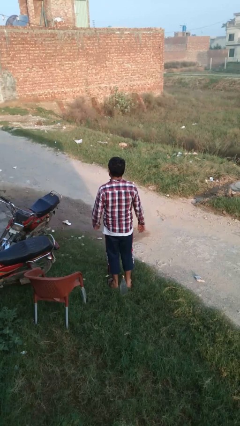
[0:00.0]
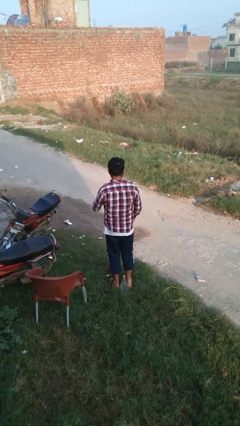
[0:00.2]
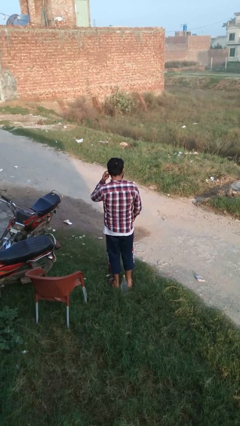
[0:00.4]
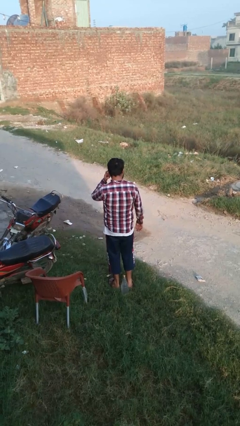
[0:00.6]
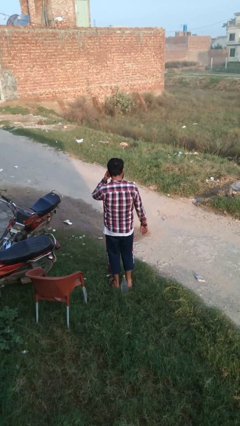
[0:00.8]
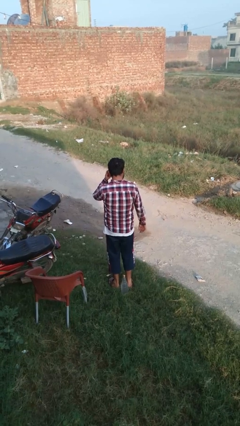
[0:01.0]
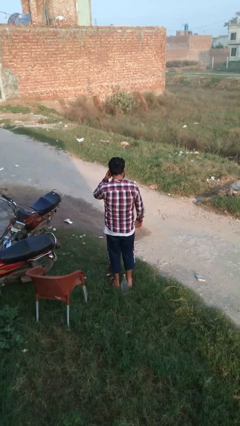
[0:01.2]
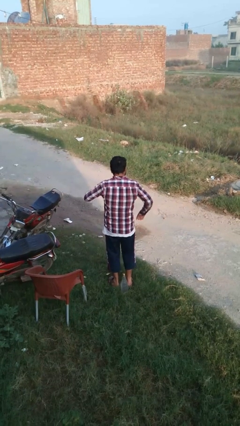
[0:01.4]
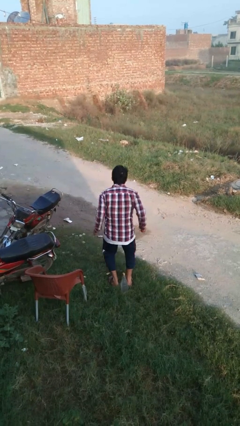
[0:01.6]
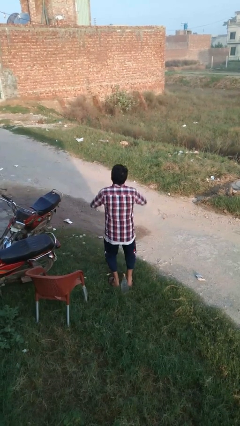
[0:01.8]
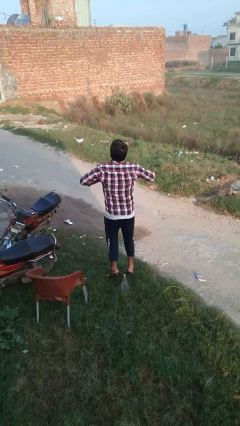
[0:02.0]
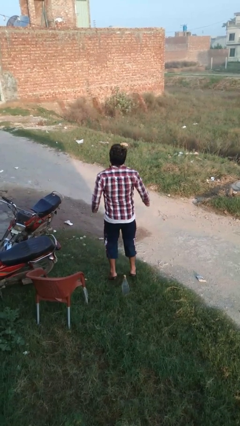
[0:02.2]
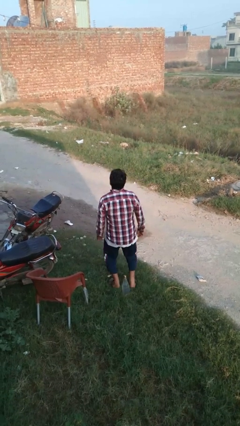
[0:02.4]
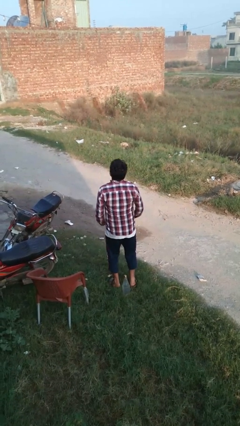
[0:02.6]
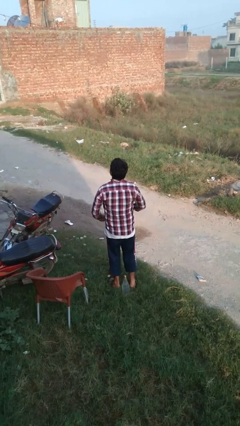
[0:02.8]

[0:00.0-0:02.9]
person jumps

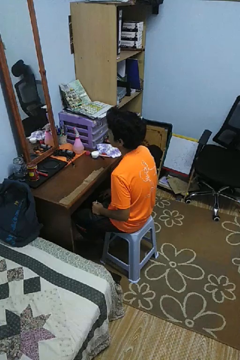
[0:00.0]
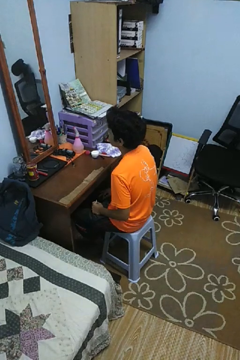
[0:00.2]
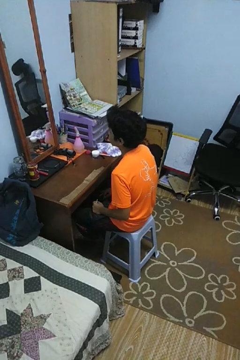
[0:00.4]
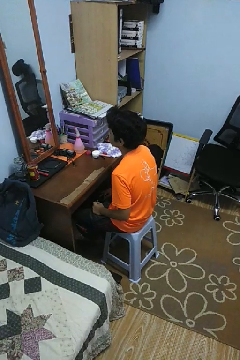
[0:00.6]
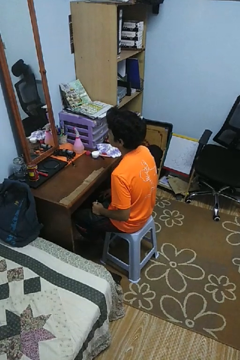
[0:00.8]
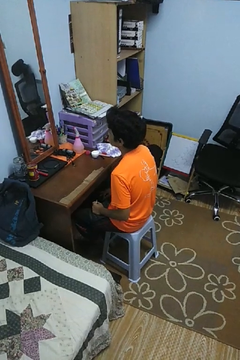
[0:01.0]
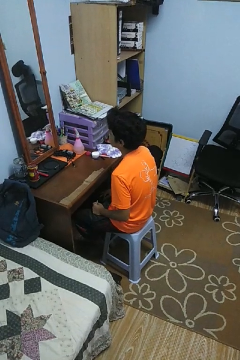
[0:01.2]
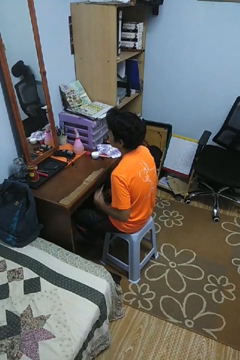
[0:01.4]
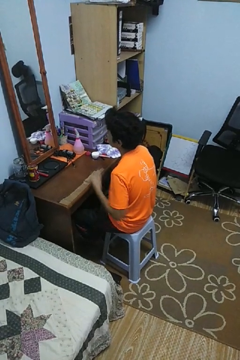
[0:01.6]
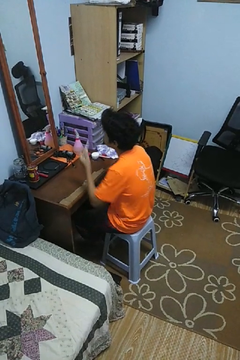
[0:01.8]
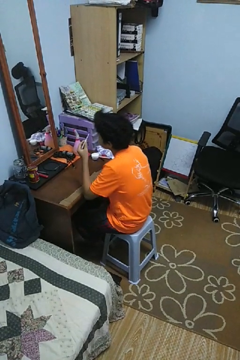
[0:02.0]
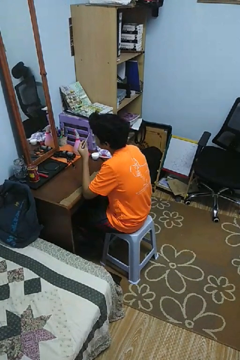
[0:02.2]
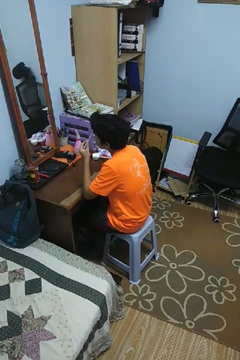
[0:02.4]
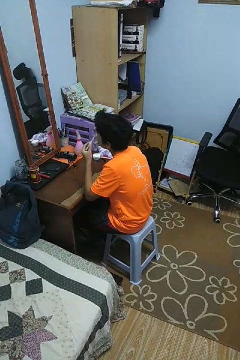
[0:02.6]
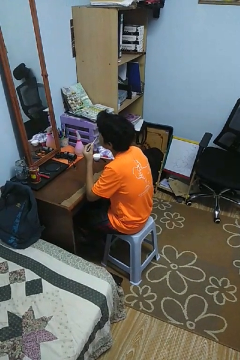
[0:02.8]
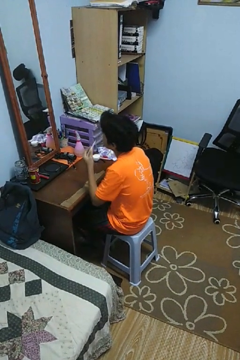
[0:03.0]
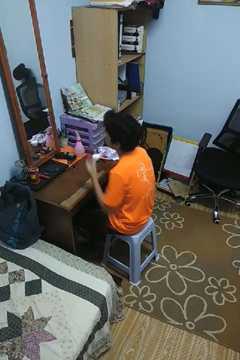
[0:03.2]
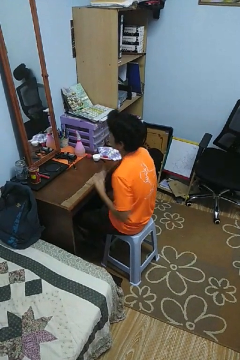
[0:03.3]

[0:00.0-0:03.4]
person applies eye makeup

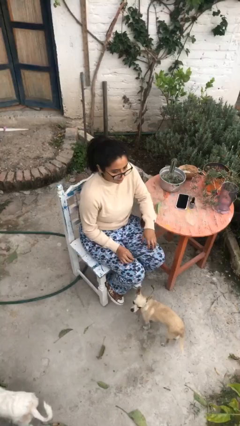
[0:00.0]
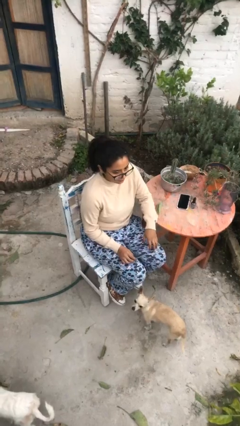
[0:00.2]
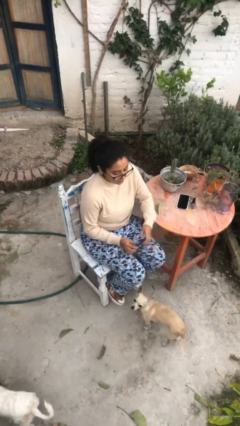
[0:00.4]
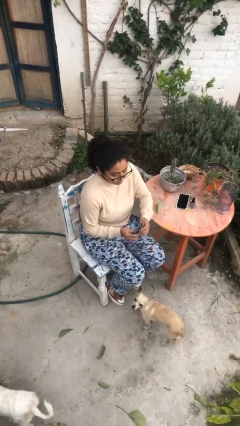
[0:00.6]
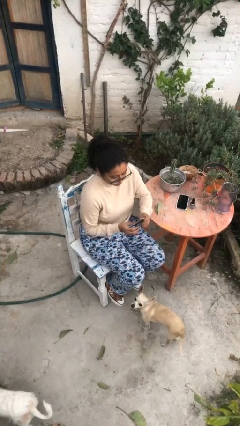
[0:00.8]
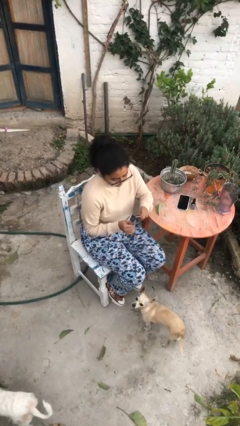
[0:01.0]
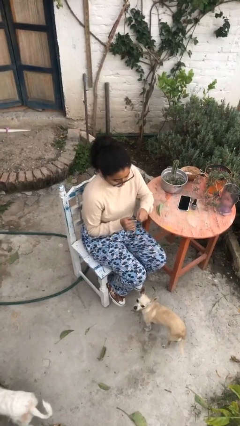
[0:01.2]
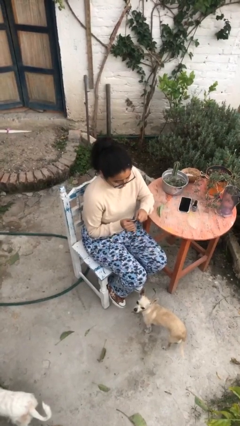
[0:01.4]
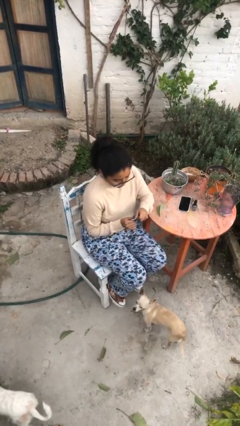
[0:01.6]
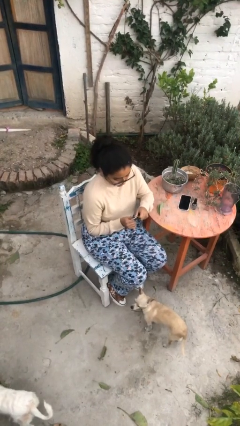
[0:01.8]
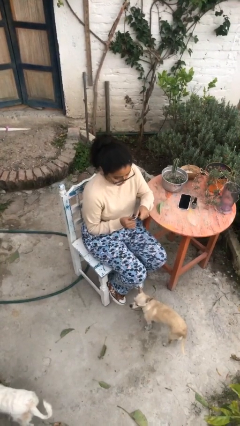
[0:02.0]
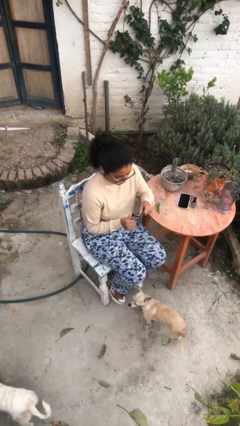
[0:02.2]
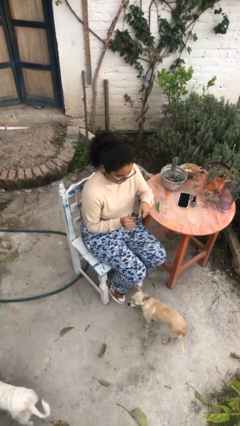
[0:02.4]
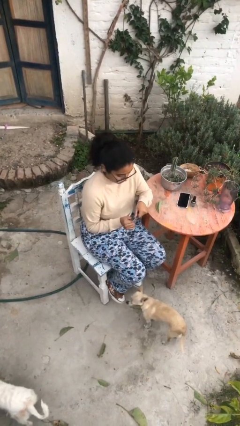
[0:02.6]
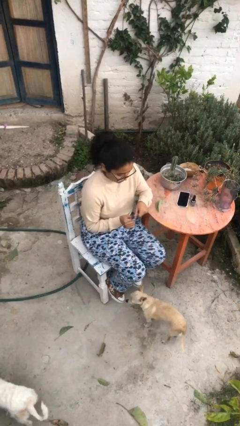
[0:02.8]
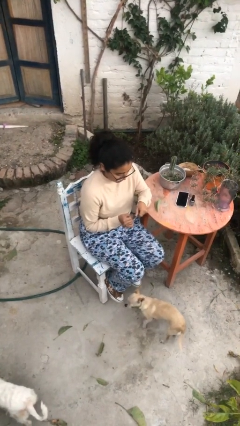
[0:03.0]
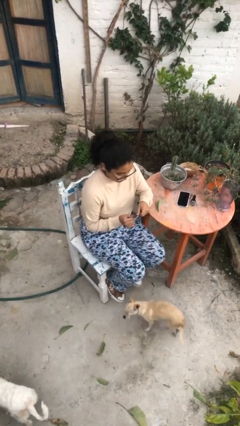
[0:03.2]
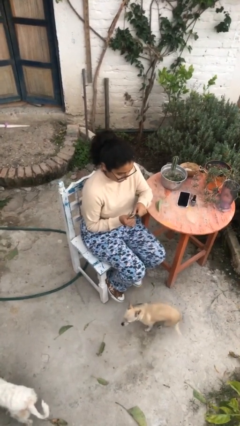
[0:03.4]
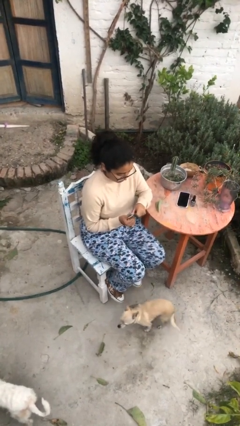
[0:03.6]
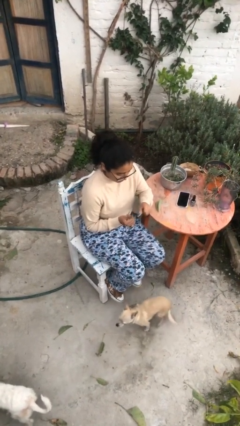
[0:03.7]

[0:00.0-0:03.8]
person files fingernails

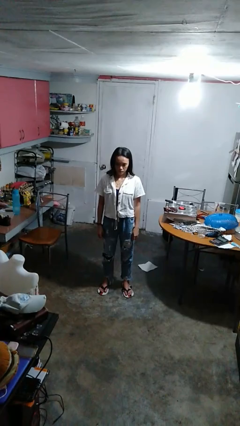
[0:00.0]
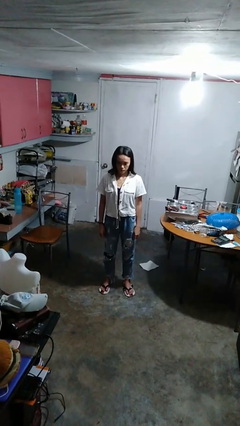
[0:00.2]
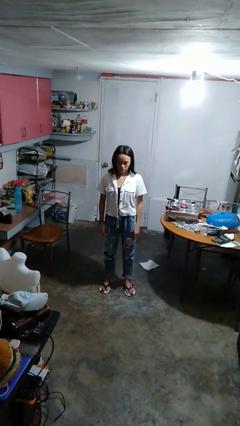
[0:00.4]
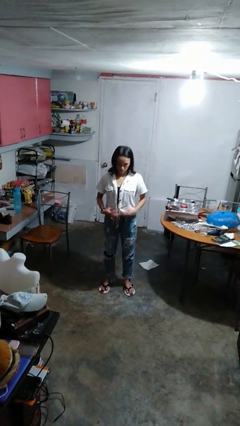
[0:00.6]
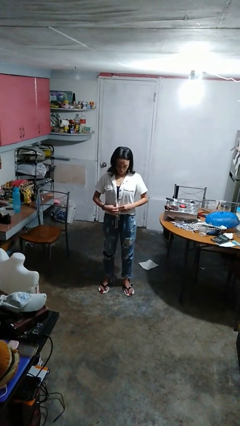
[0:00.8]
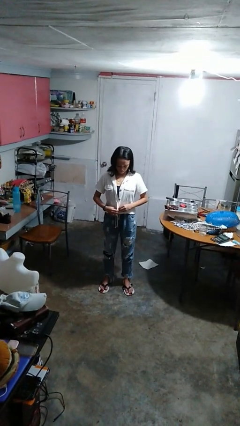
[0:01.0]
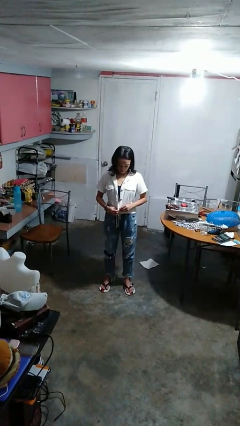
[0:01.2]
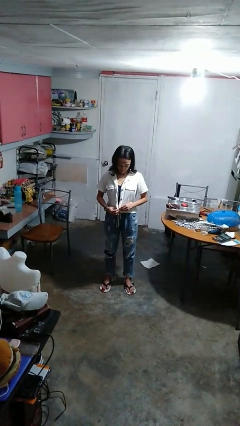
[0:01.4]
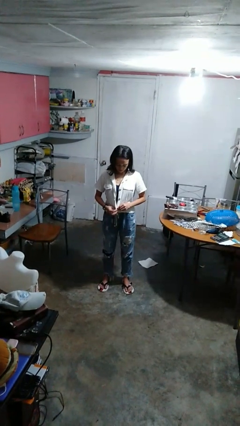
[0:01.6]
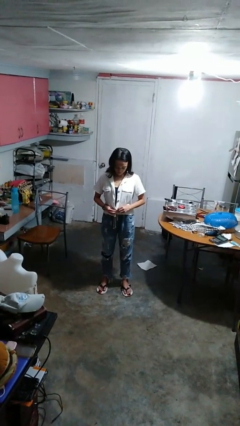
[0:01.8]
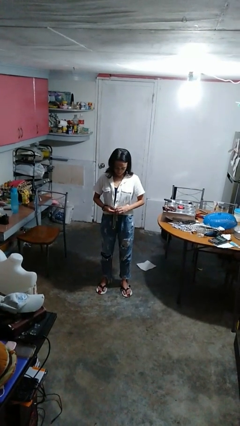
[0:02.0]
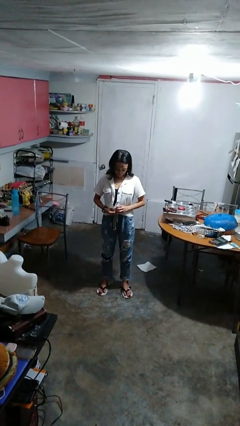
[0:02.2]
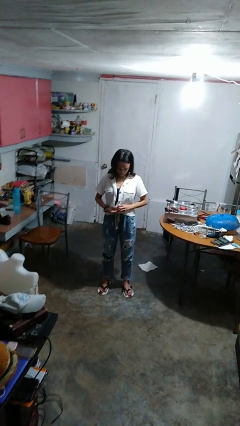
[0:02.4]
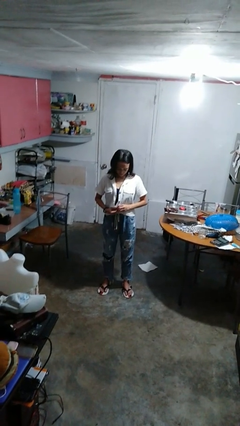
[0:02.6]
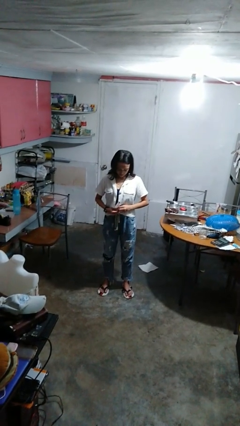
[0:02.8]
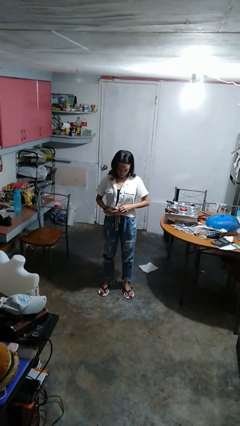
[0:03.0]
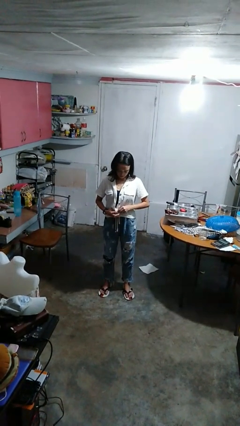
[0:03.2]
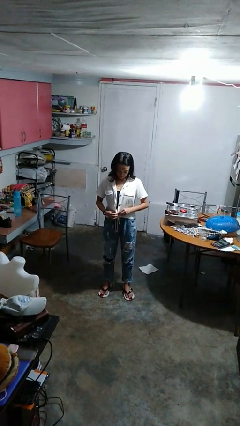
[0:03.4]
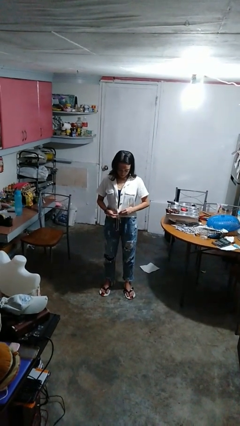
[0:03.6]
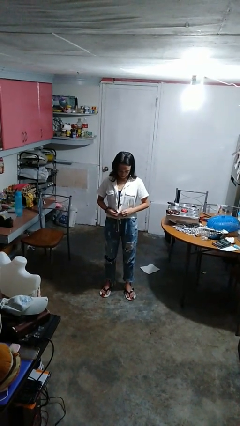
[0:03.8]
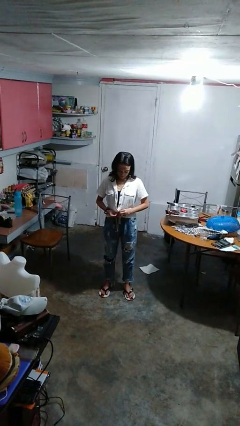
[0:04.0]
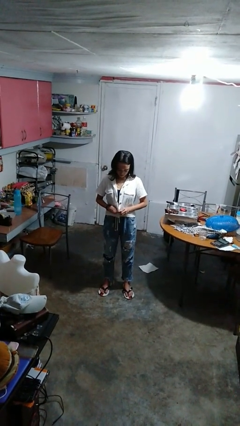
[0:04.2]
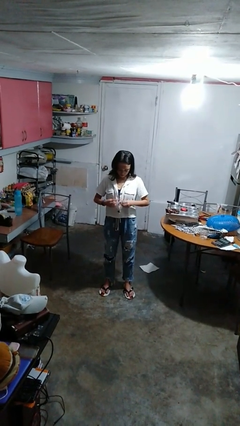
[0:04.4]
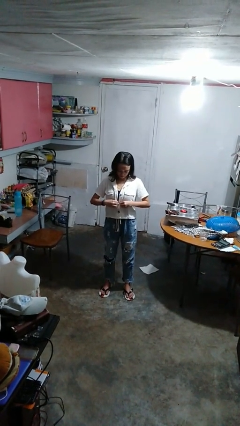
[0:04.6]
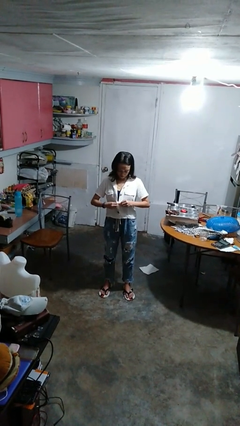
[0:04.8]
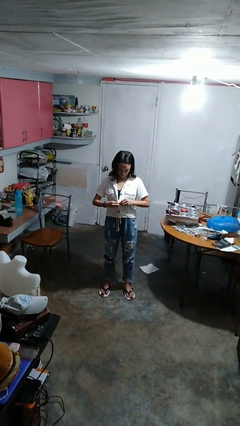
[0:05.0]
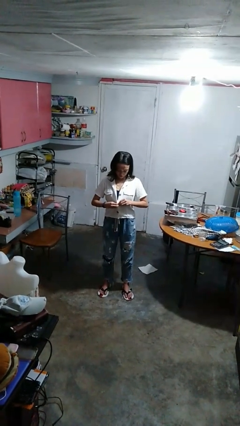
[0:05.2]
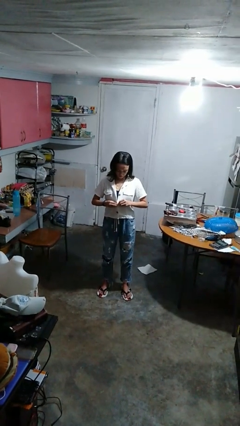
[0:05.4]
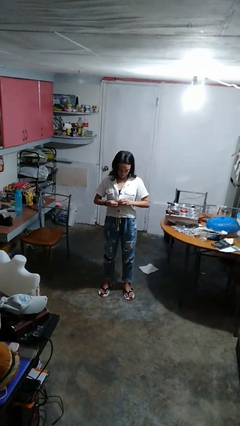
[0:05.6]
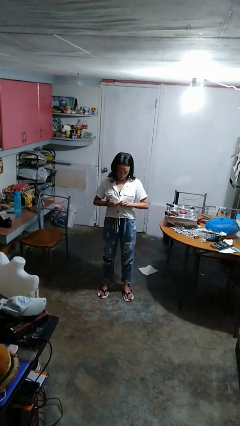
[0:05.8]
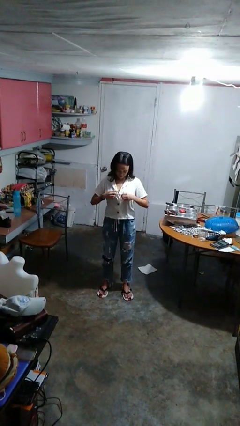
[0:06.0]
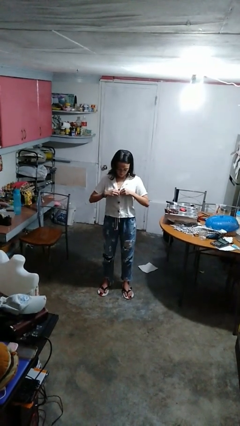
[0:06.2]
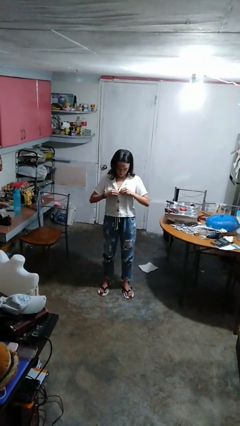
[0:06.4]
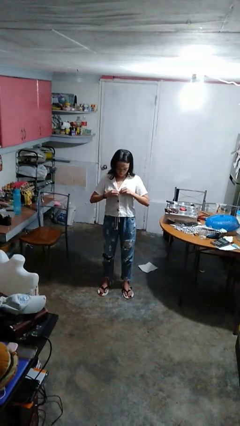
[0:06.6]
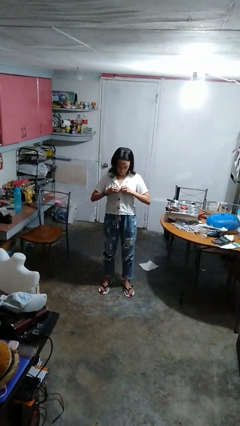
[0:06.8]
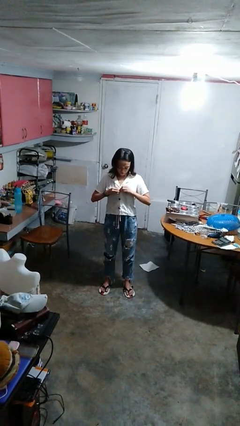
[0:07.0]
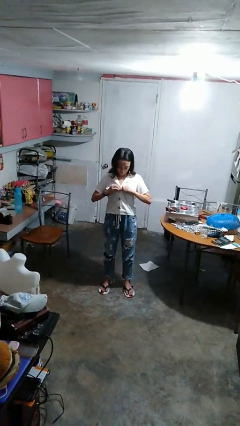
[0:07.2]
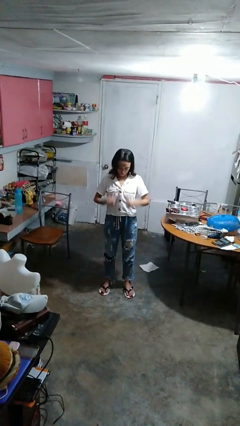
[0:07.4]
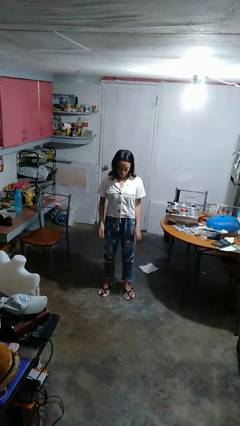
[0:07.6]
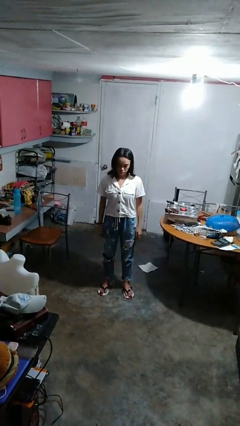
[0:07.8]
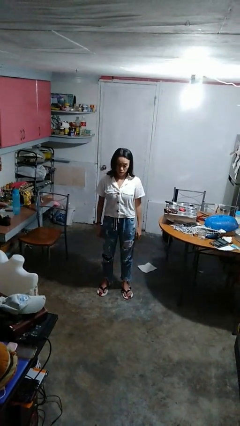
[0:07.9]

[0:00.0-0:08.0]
person buttons shirt
